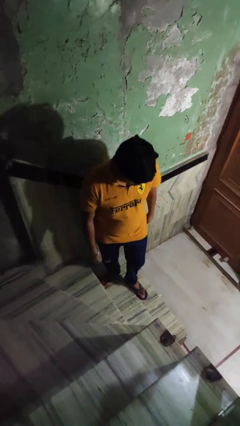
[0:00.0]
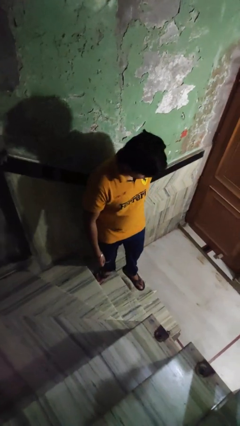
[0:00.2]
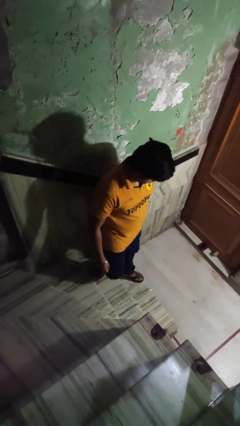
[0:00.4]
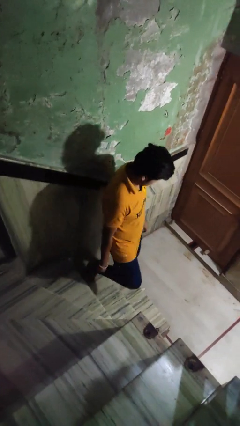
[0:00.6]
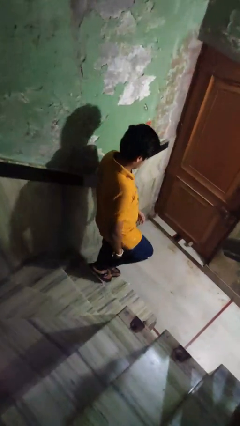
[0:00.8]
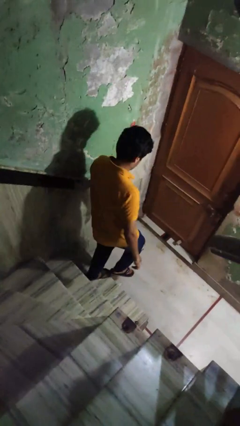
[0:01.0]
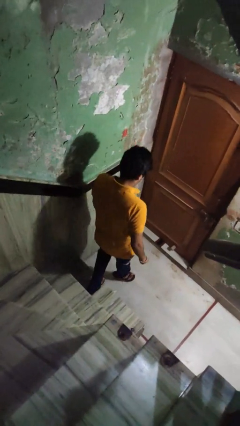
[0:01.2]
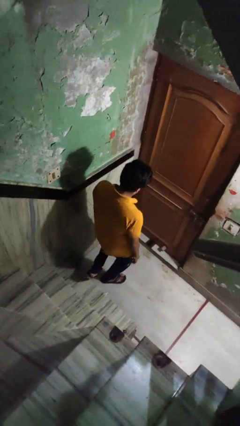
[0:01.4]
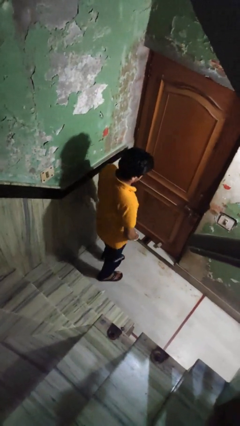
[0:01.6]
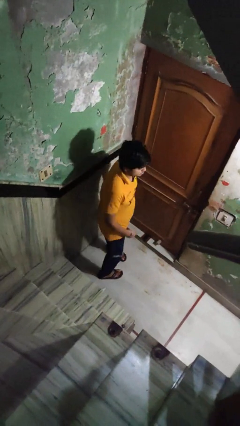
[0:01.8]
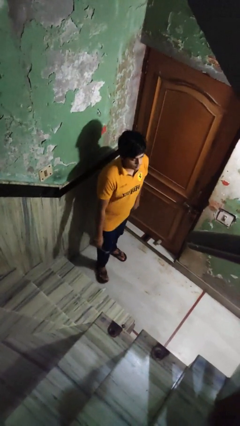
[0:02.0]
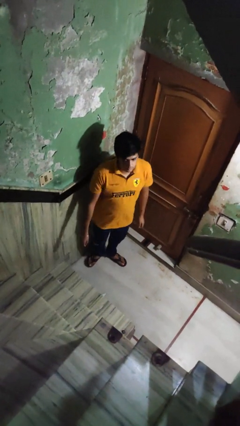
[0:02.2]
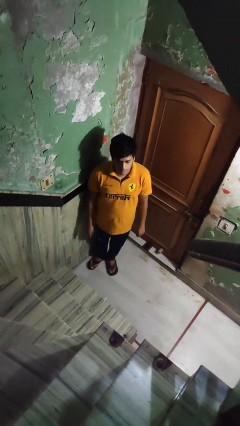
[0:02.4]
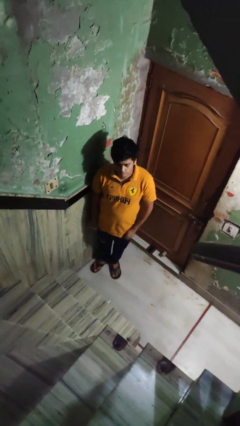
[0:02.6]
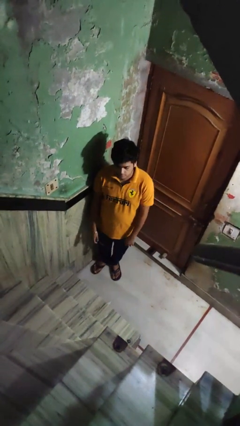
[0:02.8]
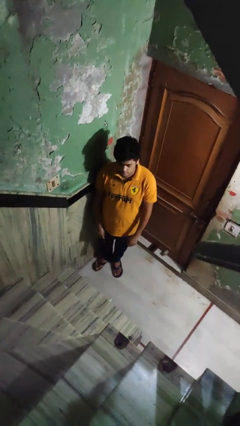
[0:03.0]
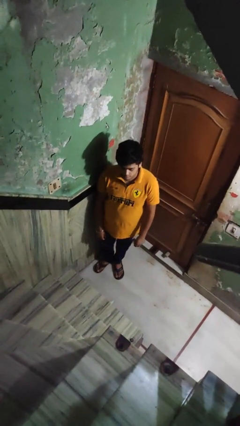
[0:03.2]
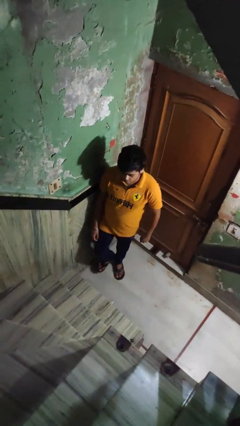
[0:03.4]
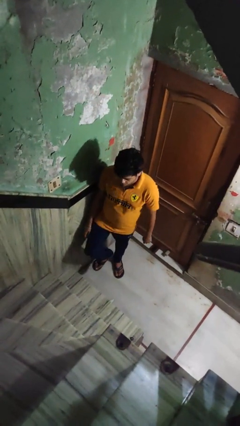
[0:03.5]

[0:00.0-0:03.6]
person climbs down stairs

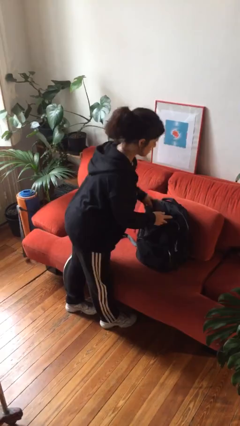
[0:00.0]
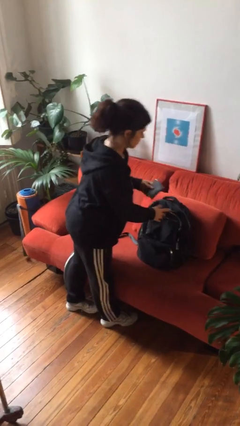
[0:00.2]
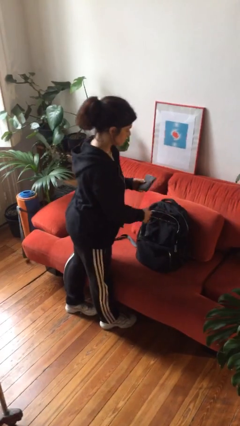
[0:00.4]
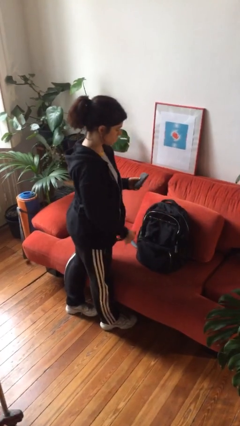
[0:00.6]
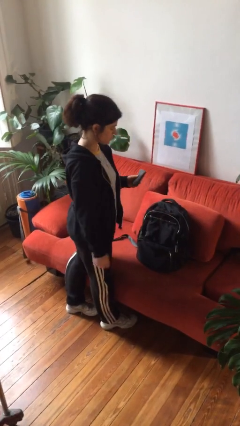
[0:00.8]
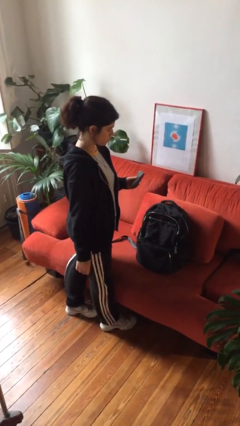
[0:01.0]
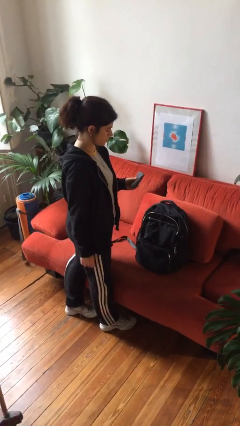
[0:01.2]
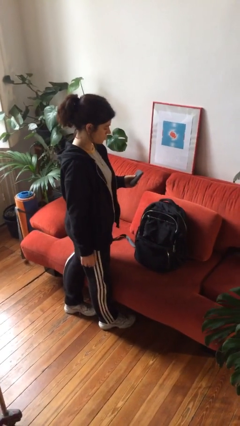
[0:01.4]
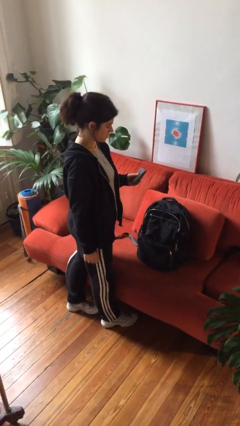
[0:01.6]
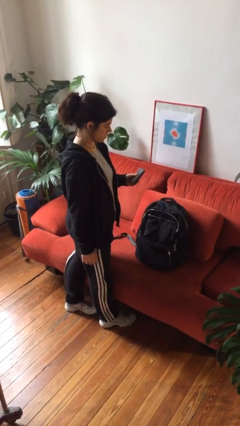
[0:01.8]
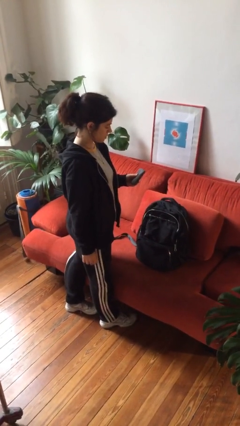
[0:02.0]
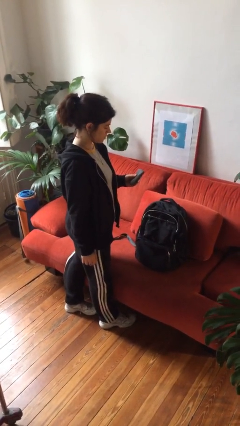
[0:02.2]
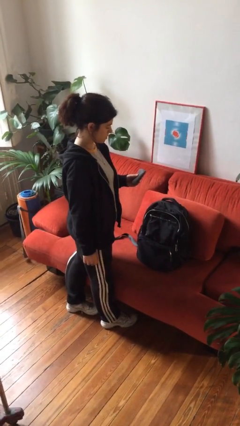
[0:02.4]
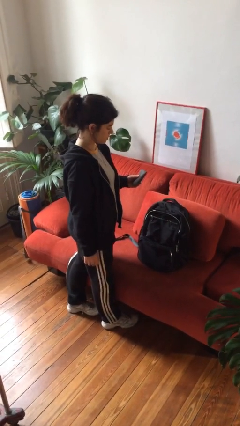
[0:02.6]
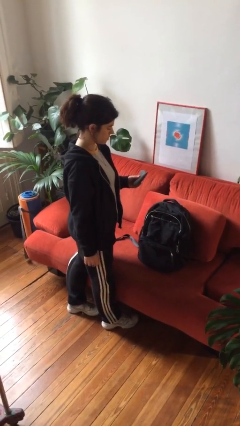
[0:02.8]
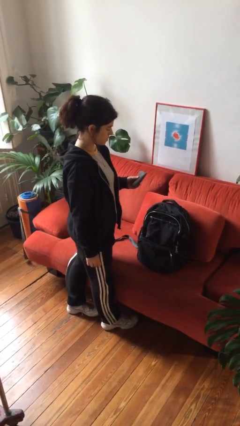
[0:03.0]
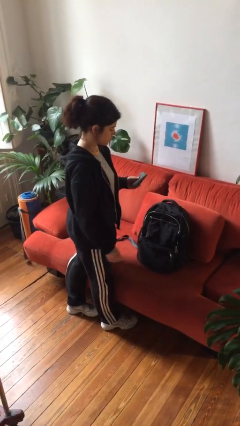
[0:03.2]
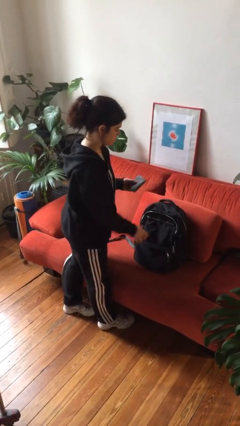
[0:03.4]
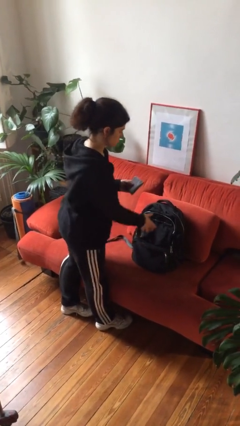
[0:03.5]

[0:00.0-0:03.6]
person takes object from backpack

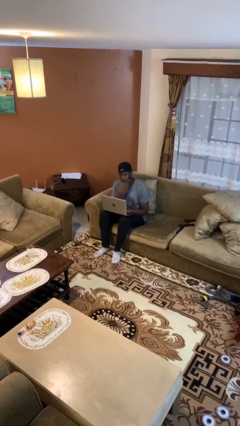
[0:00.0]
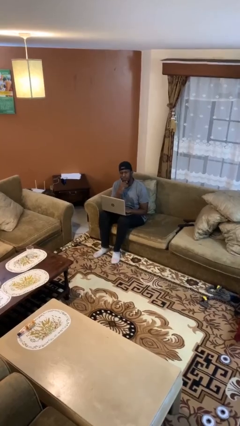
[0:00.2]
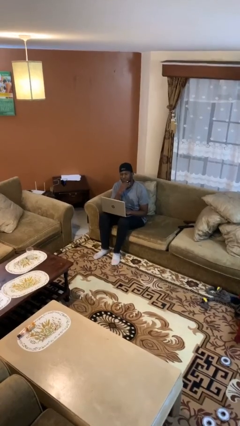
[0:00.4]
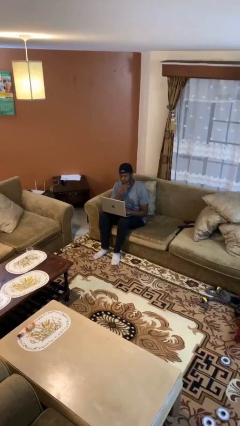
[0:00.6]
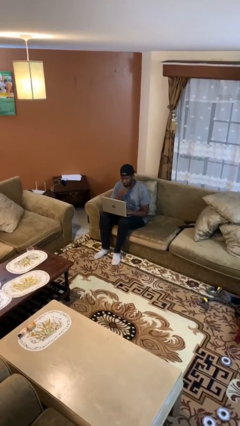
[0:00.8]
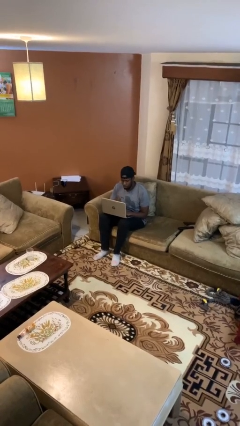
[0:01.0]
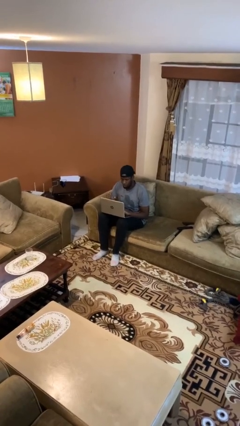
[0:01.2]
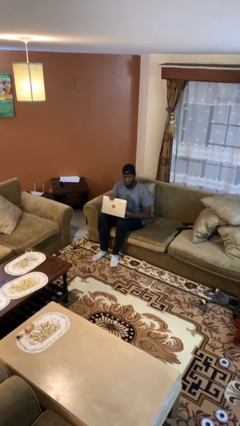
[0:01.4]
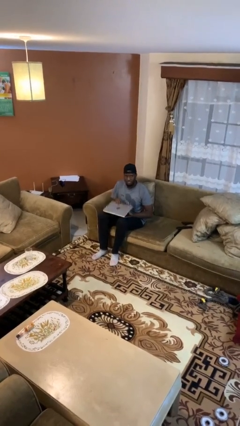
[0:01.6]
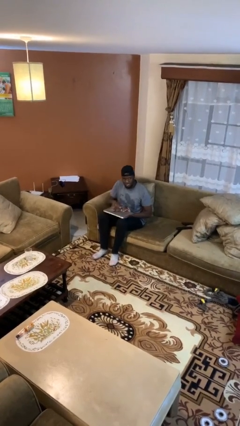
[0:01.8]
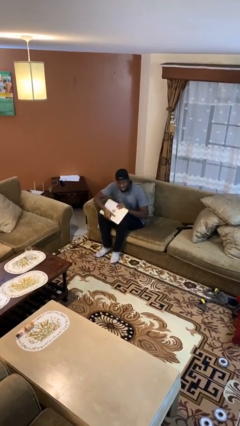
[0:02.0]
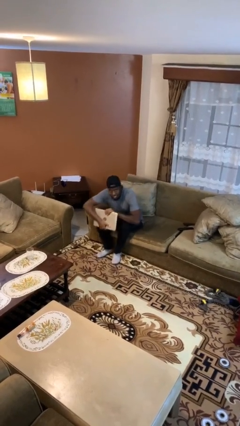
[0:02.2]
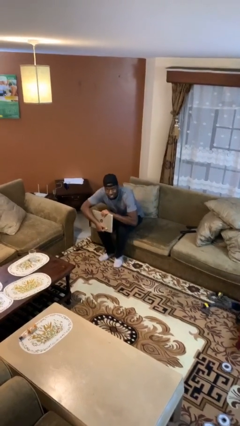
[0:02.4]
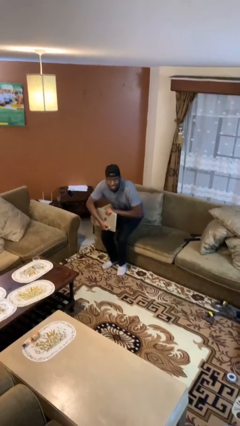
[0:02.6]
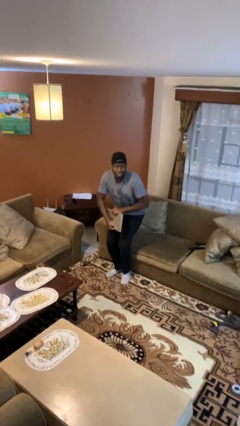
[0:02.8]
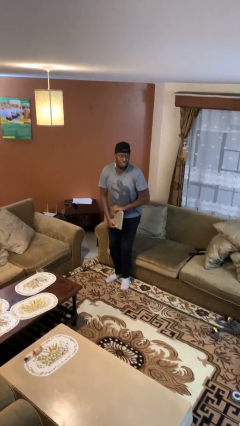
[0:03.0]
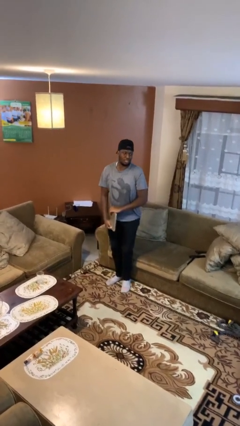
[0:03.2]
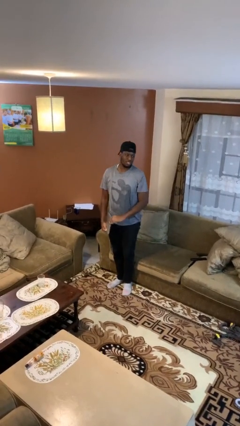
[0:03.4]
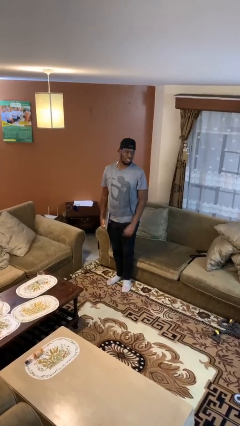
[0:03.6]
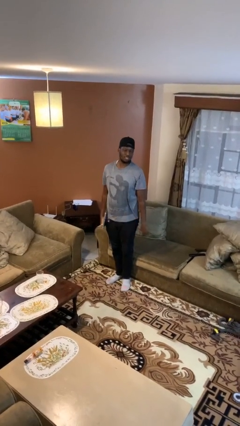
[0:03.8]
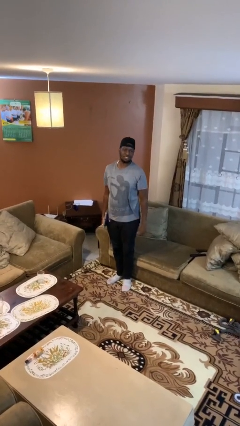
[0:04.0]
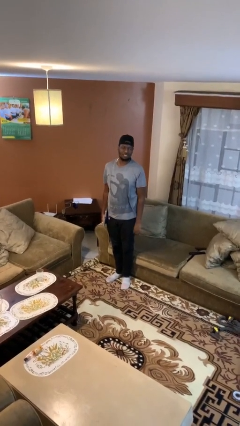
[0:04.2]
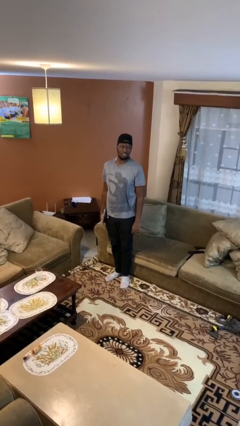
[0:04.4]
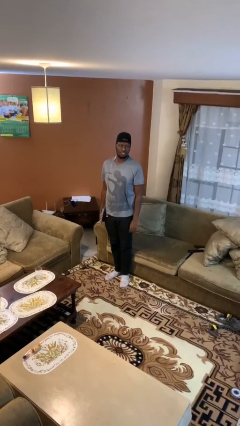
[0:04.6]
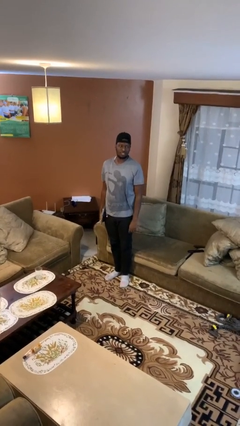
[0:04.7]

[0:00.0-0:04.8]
person stands up

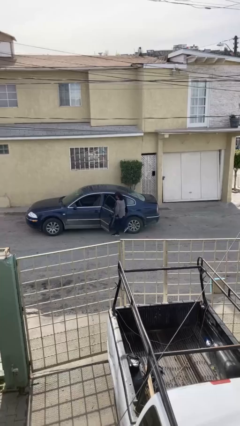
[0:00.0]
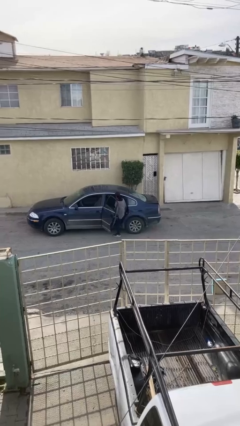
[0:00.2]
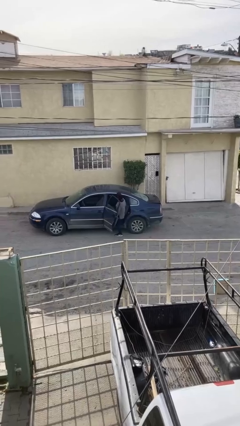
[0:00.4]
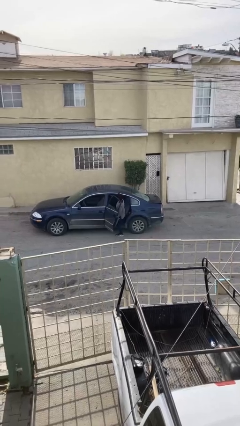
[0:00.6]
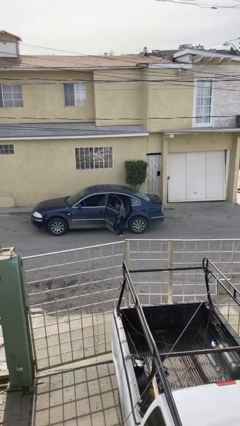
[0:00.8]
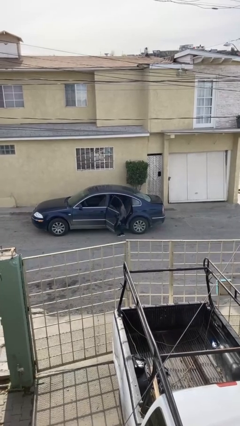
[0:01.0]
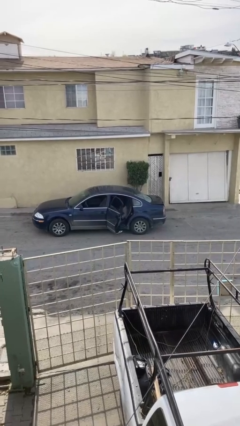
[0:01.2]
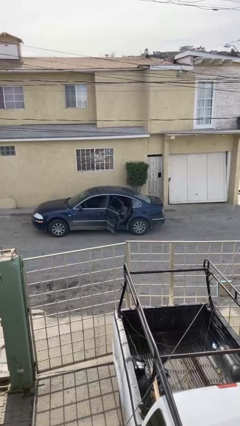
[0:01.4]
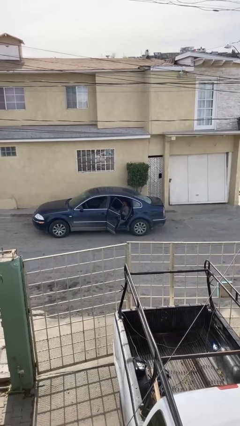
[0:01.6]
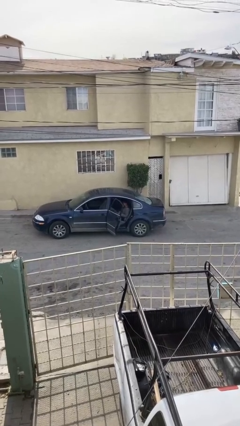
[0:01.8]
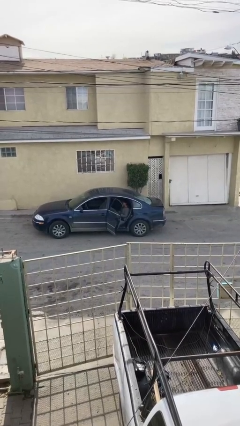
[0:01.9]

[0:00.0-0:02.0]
person enters car

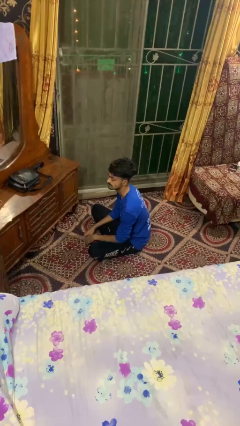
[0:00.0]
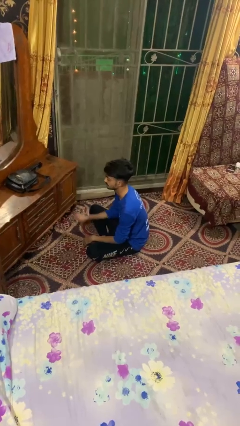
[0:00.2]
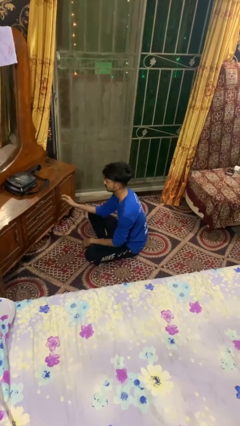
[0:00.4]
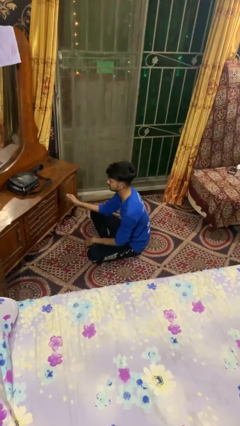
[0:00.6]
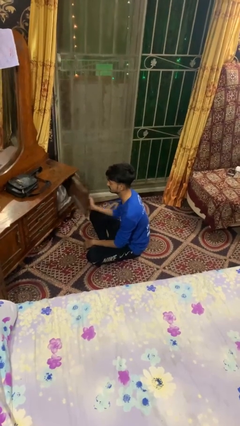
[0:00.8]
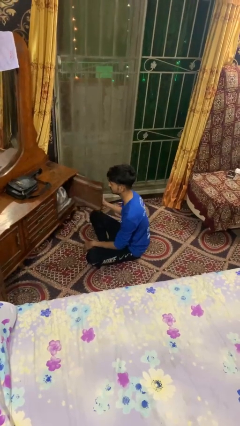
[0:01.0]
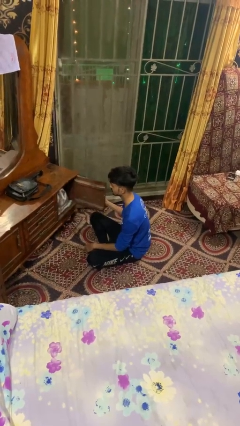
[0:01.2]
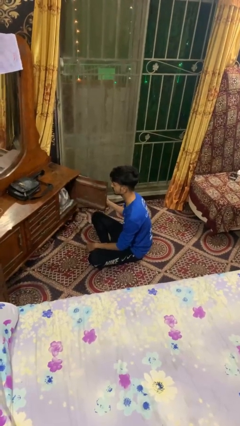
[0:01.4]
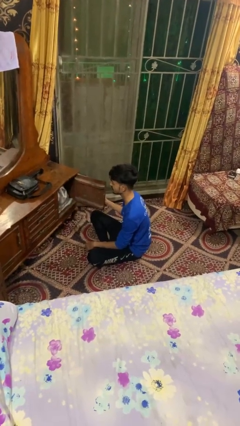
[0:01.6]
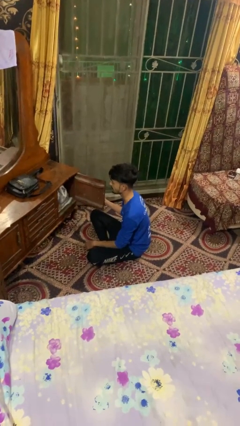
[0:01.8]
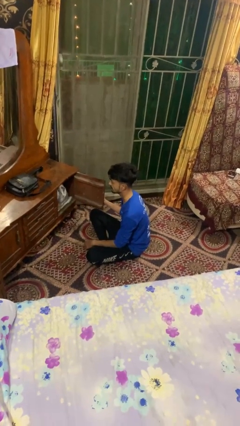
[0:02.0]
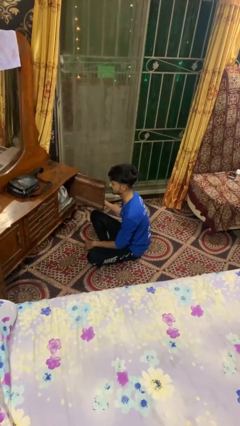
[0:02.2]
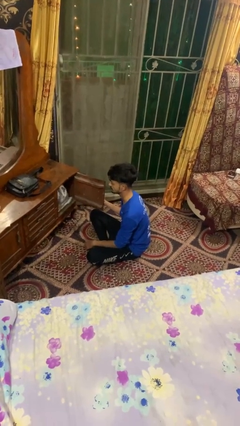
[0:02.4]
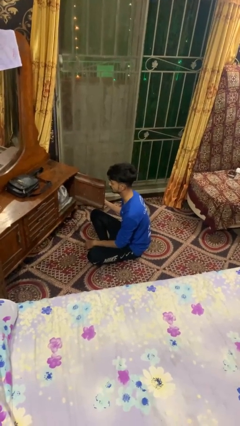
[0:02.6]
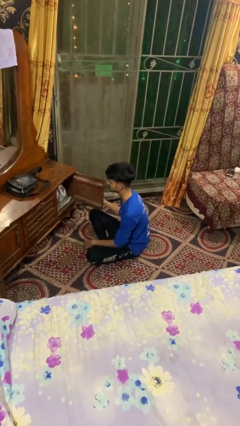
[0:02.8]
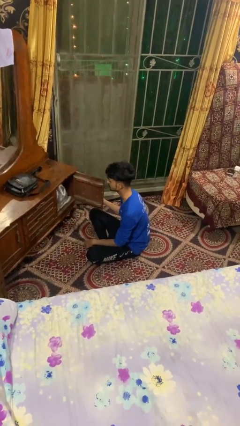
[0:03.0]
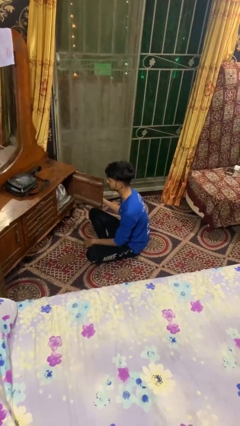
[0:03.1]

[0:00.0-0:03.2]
person opens dresser drawer

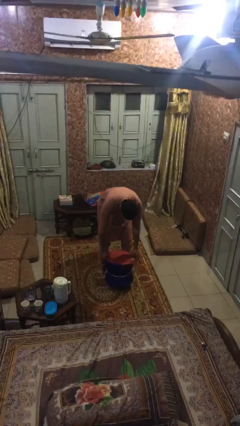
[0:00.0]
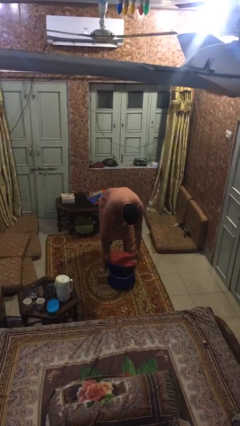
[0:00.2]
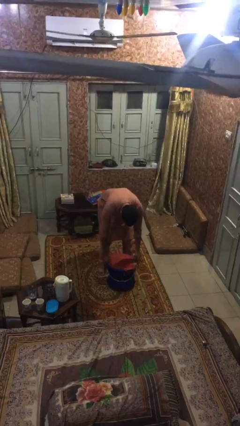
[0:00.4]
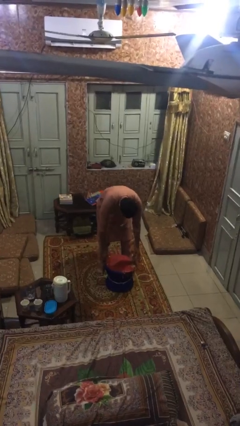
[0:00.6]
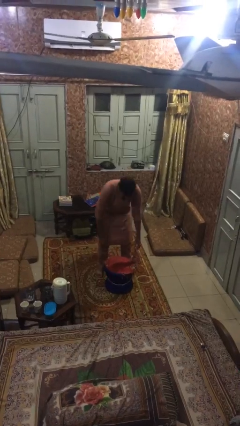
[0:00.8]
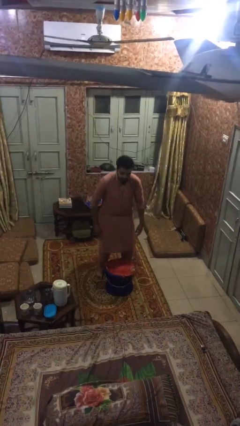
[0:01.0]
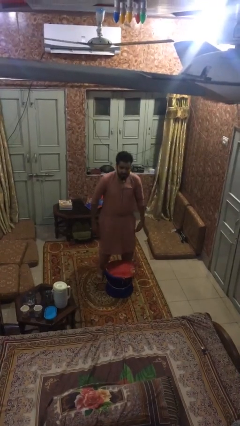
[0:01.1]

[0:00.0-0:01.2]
person puts down object on floor
